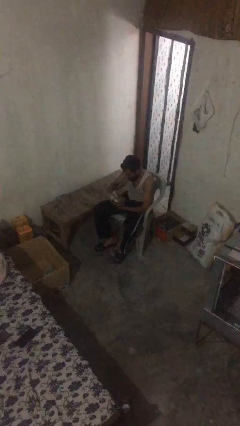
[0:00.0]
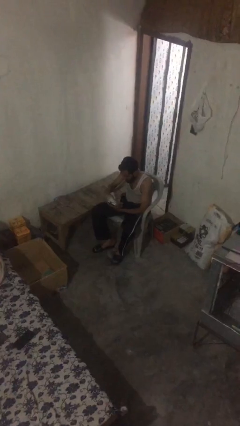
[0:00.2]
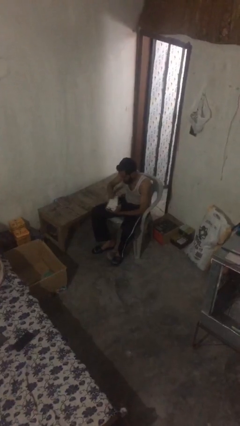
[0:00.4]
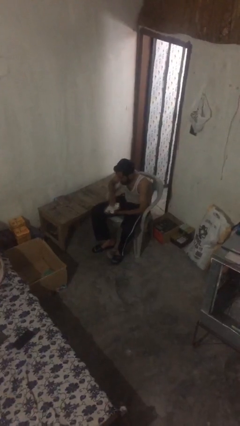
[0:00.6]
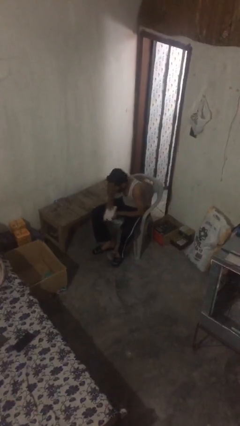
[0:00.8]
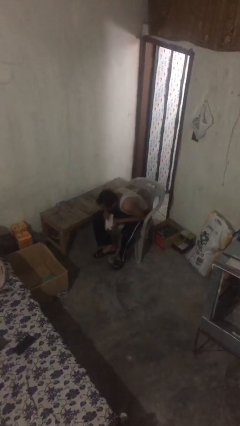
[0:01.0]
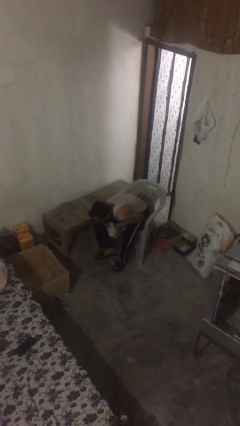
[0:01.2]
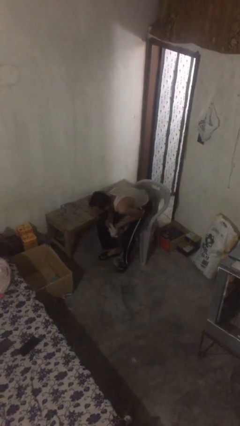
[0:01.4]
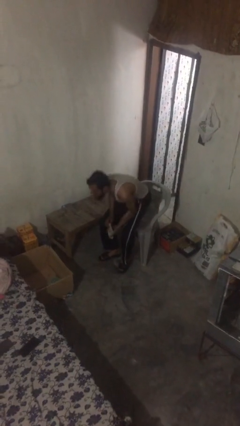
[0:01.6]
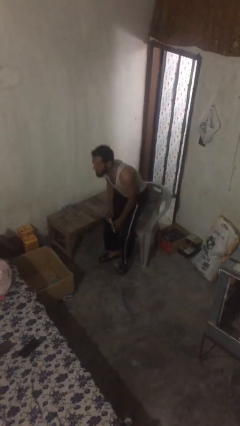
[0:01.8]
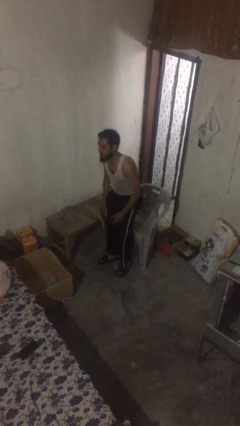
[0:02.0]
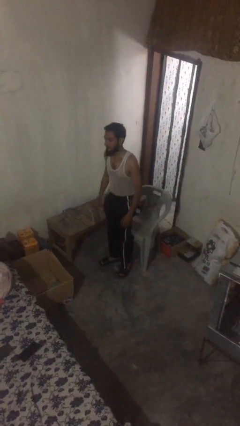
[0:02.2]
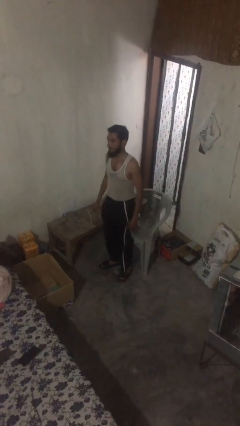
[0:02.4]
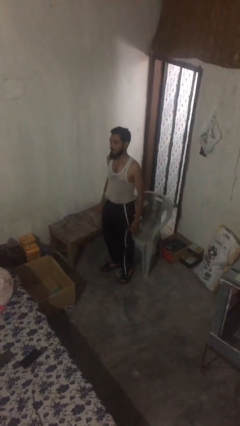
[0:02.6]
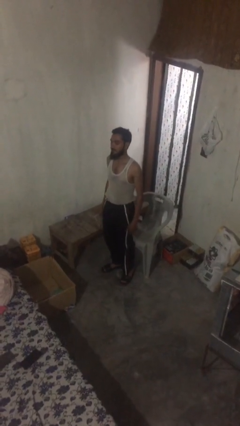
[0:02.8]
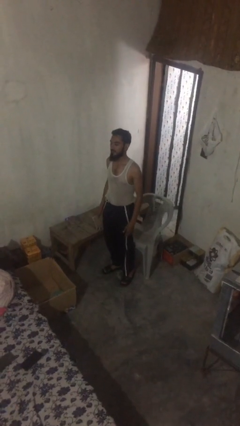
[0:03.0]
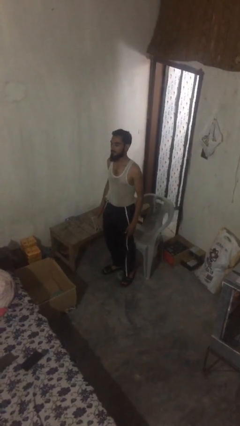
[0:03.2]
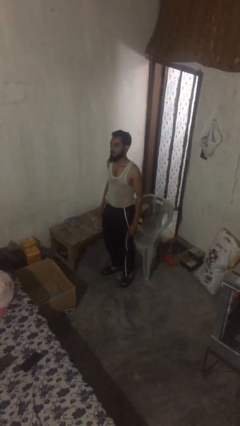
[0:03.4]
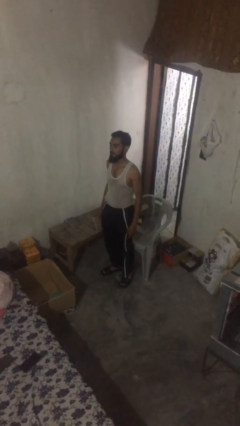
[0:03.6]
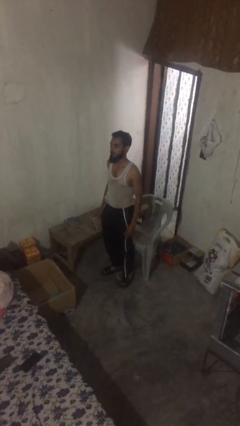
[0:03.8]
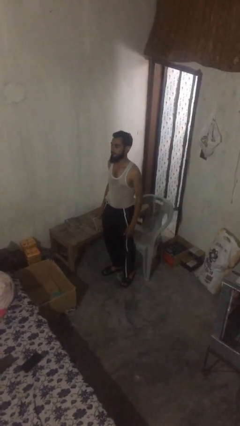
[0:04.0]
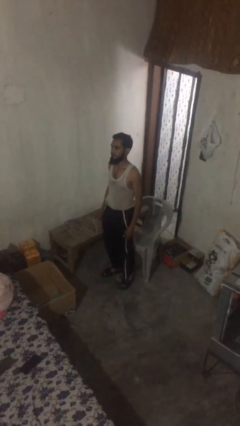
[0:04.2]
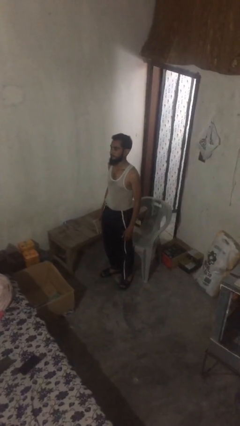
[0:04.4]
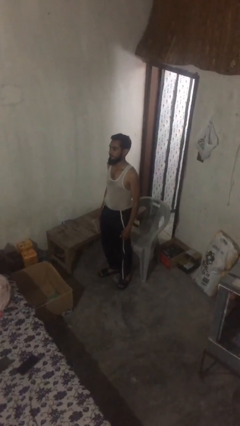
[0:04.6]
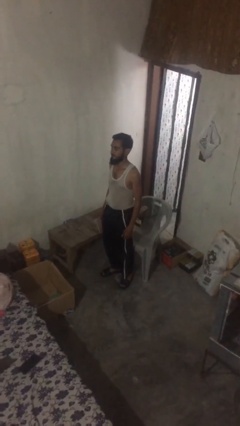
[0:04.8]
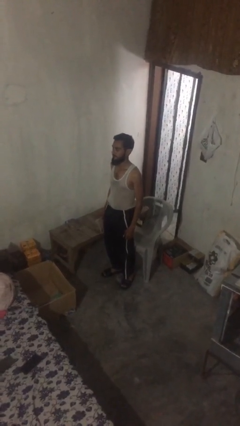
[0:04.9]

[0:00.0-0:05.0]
person stands up

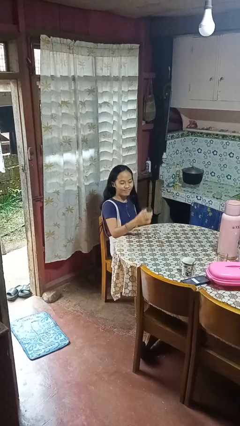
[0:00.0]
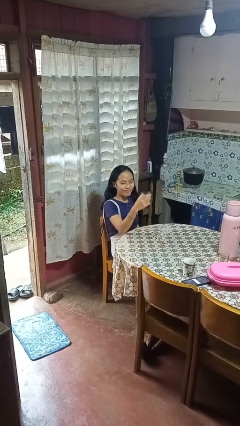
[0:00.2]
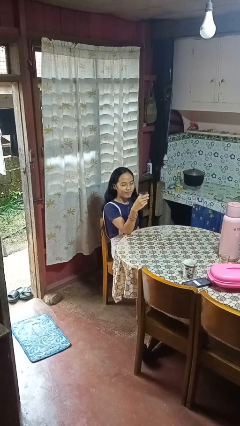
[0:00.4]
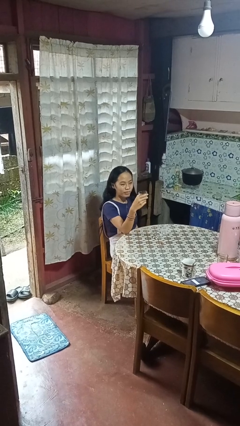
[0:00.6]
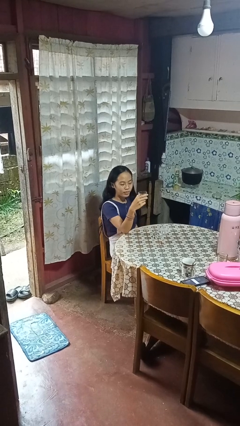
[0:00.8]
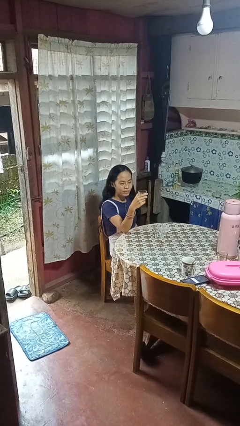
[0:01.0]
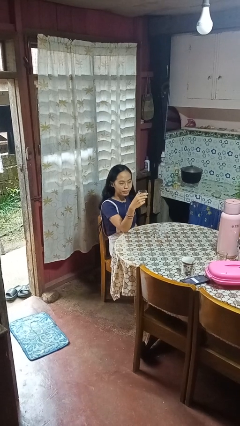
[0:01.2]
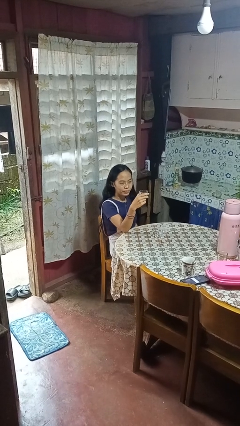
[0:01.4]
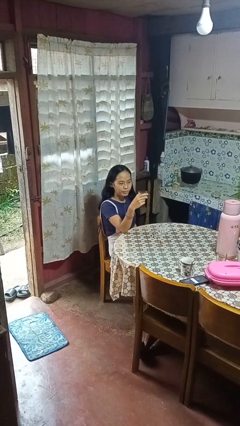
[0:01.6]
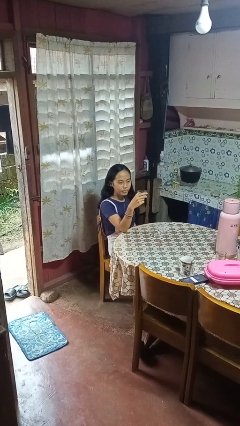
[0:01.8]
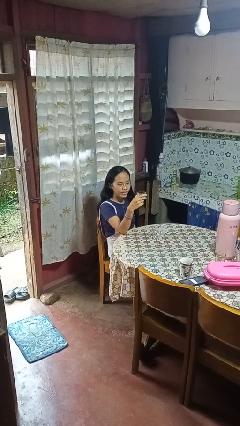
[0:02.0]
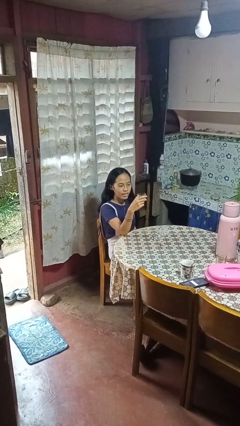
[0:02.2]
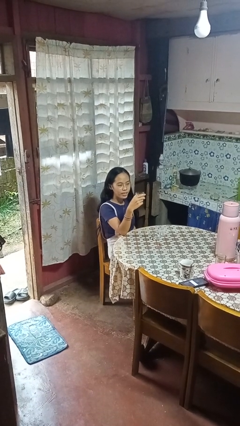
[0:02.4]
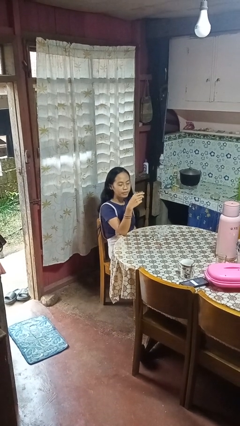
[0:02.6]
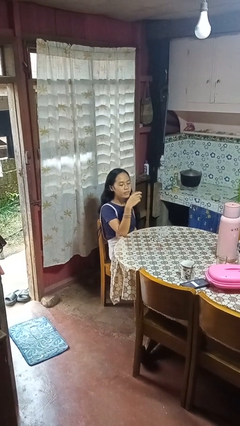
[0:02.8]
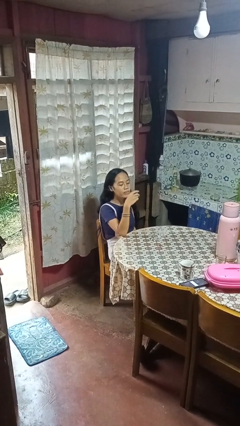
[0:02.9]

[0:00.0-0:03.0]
person picks up object from table

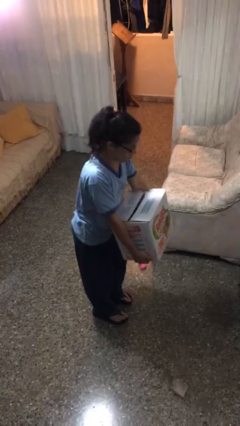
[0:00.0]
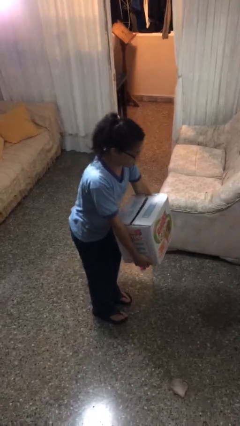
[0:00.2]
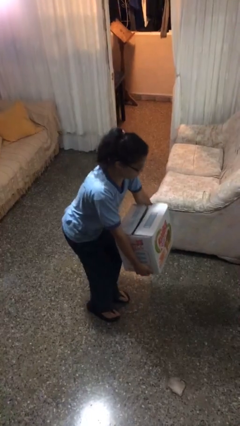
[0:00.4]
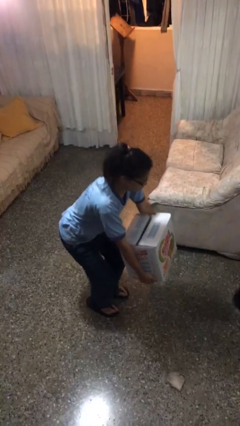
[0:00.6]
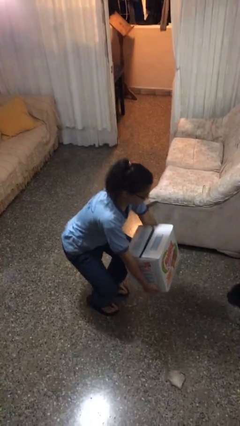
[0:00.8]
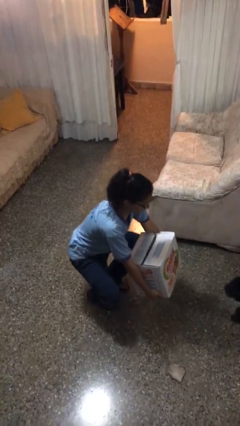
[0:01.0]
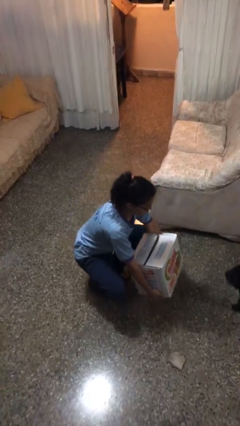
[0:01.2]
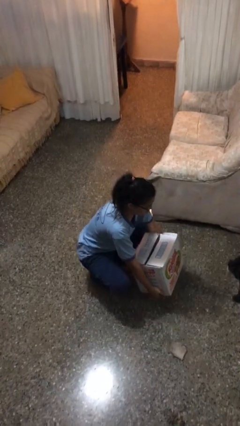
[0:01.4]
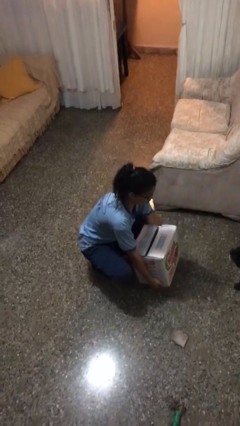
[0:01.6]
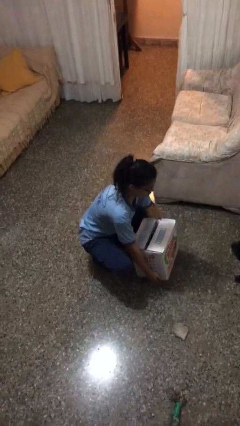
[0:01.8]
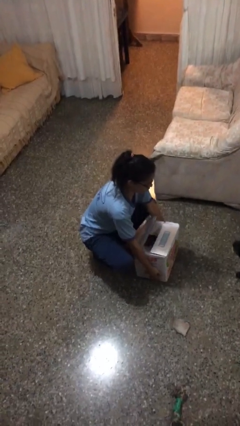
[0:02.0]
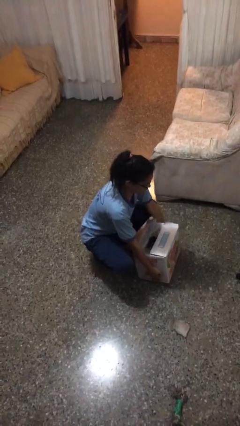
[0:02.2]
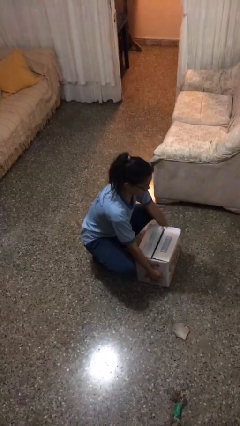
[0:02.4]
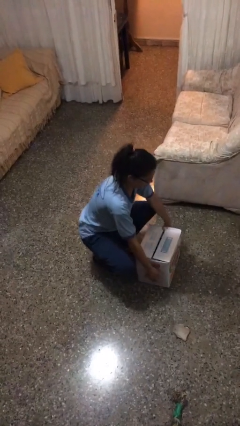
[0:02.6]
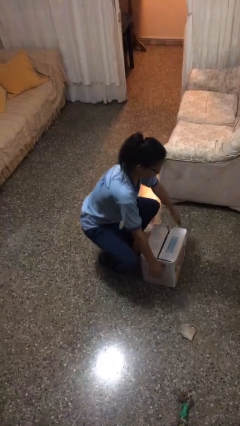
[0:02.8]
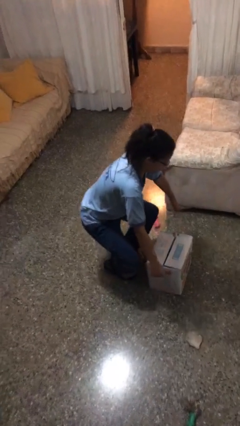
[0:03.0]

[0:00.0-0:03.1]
person puts down object on floor

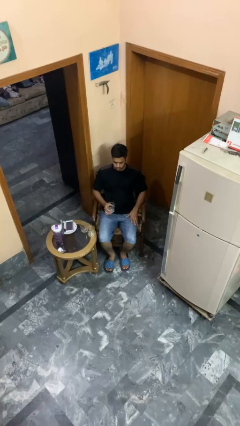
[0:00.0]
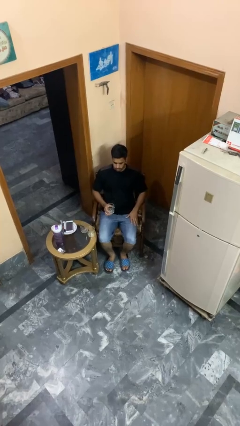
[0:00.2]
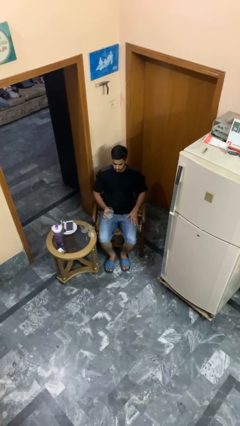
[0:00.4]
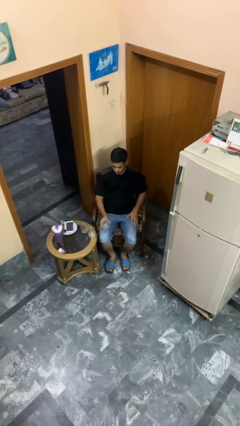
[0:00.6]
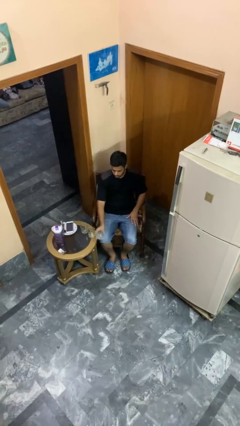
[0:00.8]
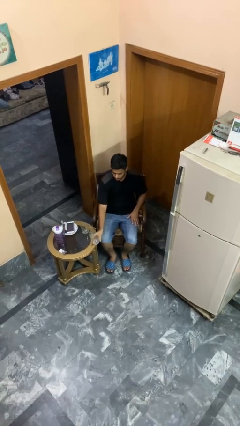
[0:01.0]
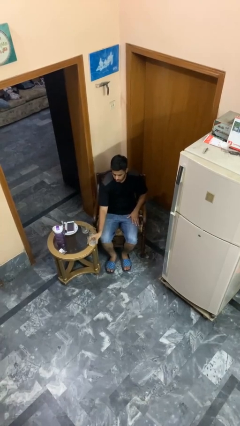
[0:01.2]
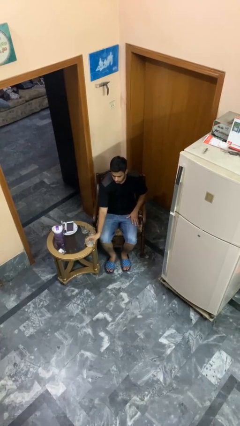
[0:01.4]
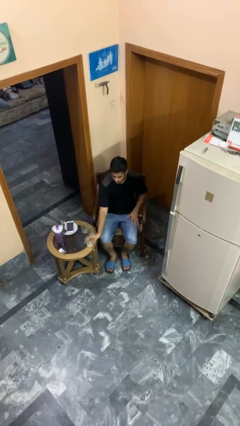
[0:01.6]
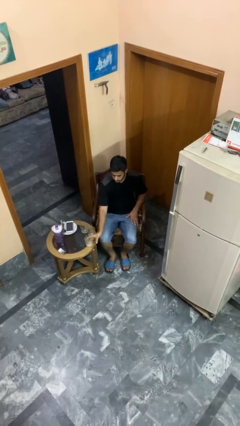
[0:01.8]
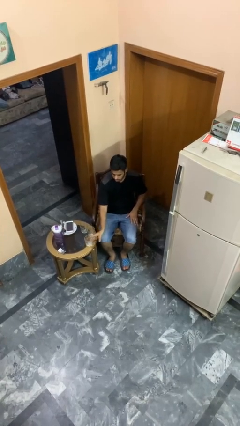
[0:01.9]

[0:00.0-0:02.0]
person puts down object on table

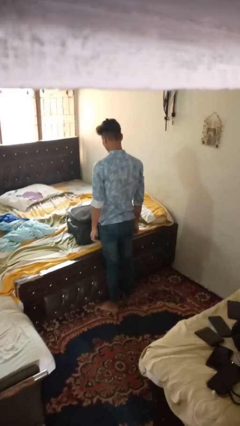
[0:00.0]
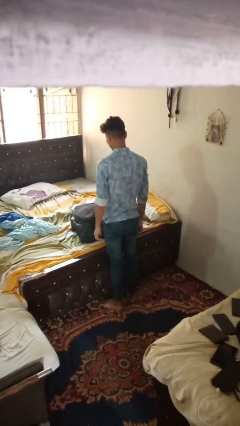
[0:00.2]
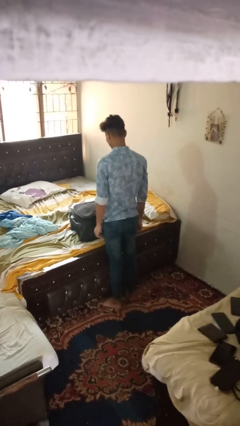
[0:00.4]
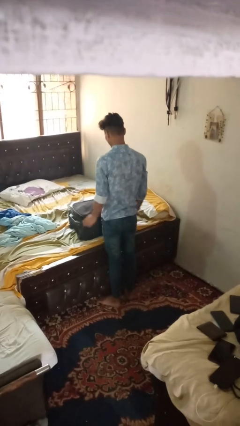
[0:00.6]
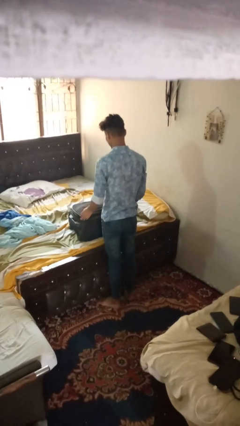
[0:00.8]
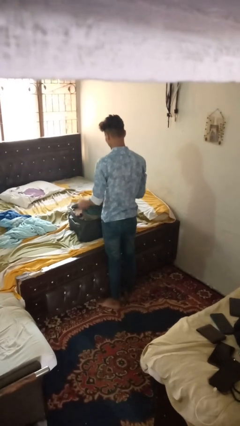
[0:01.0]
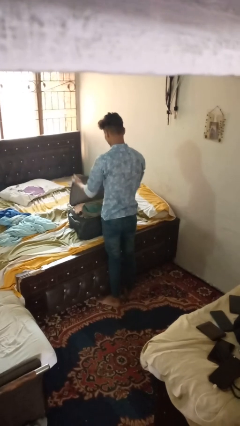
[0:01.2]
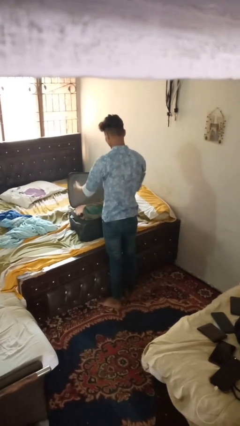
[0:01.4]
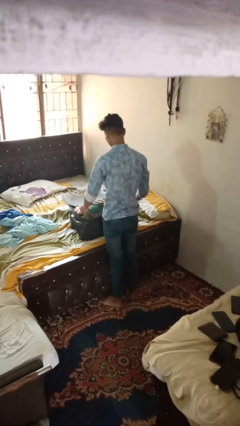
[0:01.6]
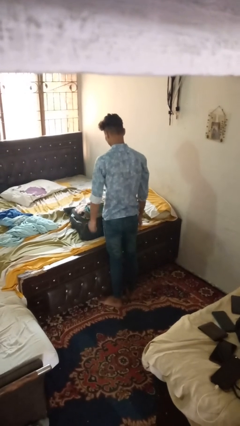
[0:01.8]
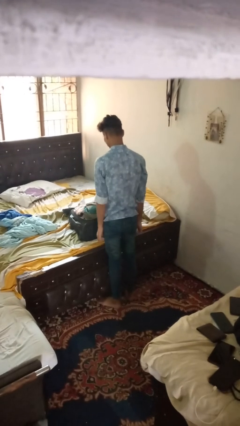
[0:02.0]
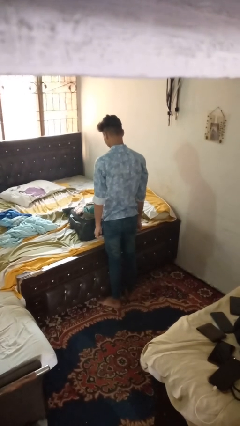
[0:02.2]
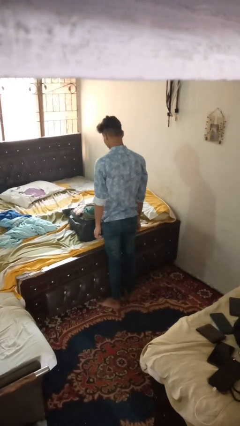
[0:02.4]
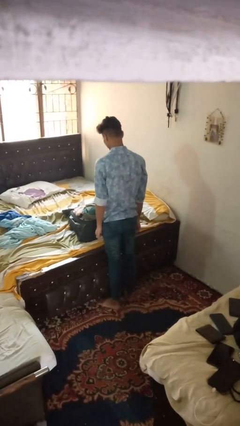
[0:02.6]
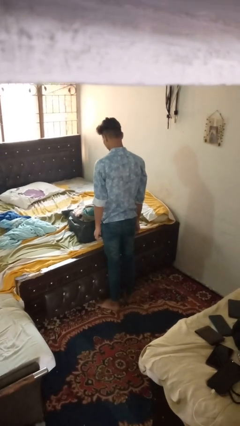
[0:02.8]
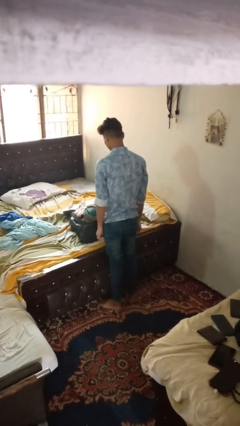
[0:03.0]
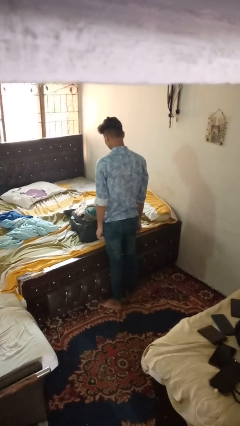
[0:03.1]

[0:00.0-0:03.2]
person opens suitcase

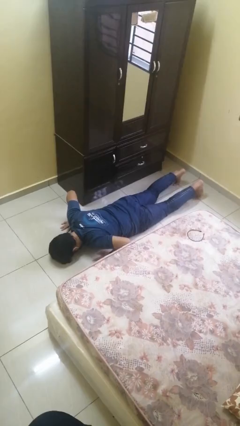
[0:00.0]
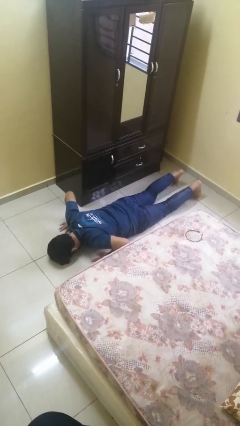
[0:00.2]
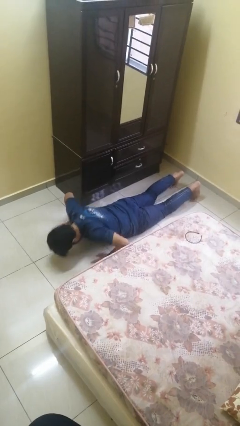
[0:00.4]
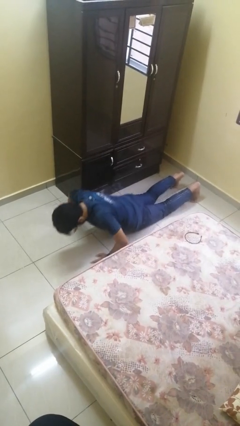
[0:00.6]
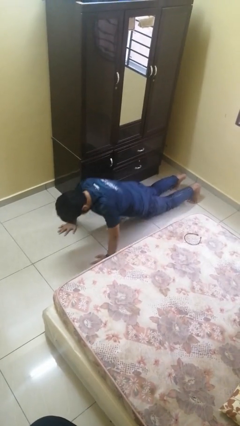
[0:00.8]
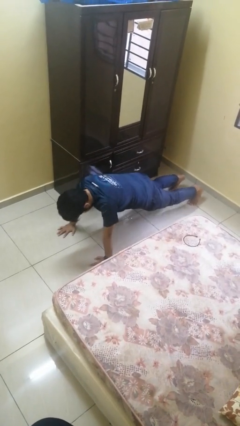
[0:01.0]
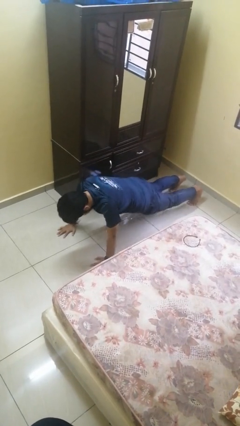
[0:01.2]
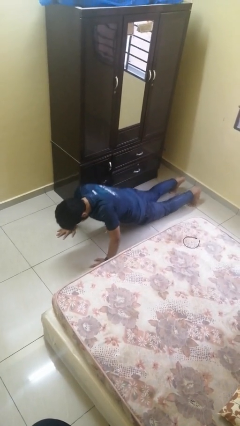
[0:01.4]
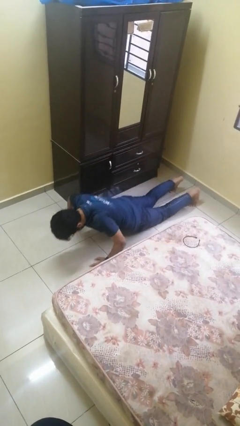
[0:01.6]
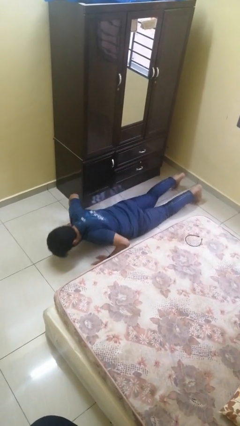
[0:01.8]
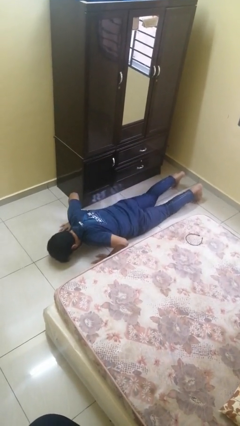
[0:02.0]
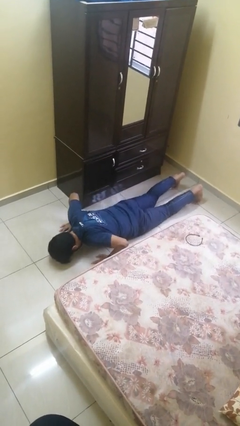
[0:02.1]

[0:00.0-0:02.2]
person exercises with pushup
